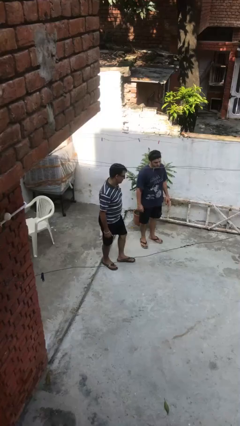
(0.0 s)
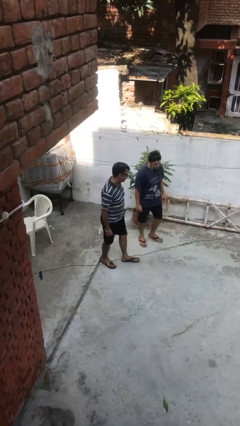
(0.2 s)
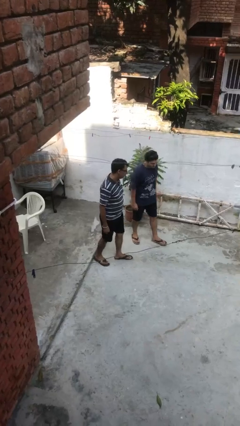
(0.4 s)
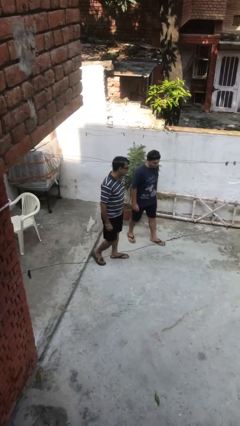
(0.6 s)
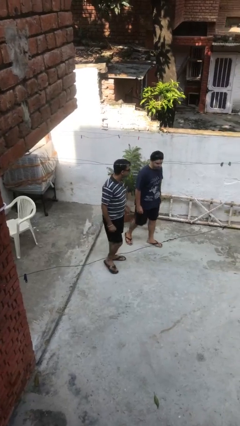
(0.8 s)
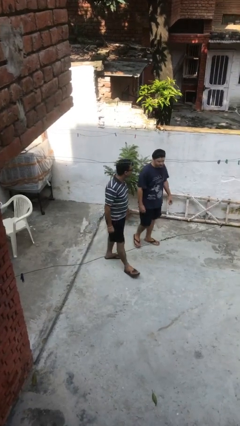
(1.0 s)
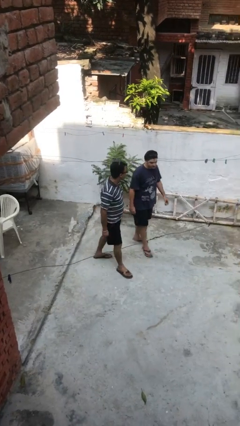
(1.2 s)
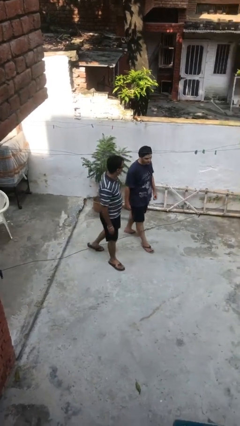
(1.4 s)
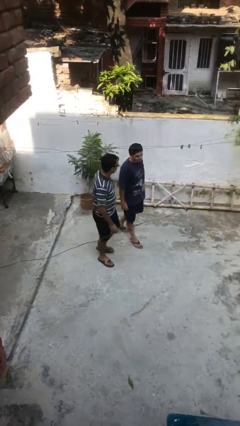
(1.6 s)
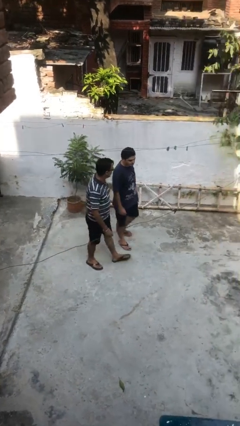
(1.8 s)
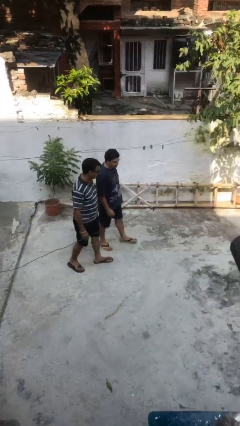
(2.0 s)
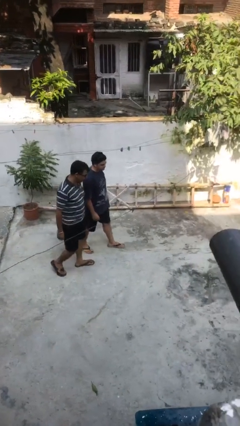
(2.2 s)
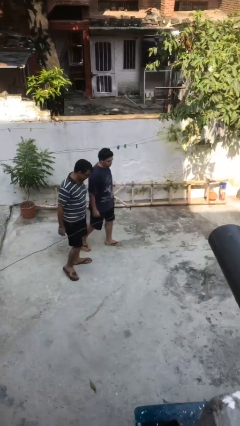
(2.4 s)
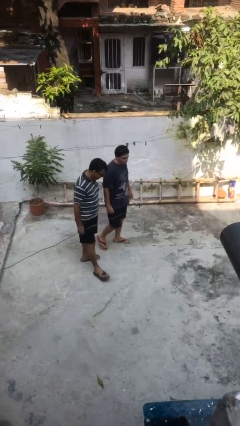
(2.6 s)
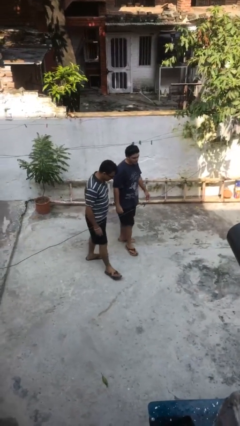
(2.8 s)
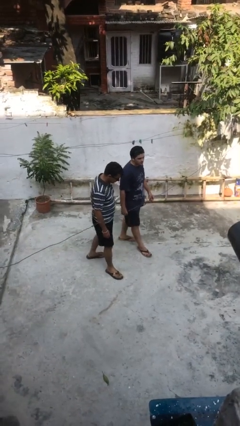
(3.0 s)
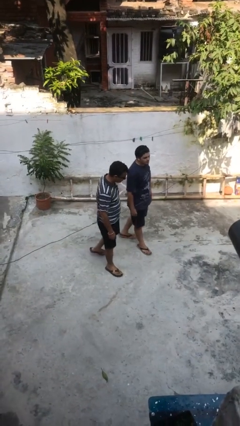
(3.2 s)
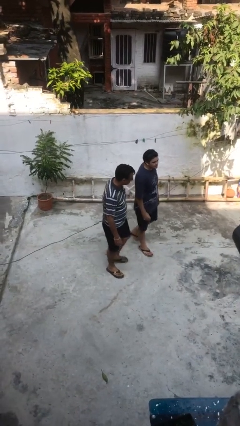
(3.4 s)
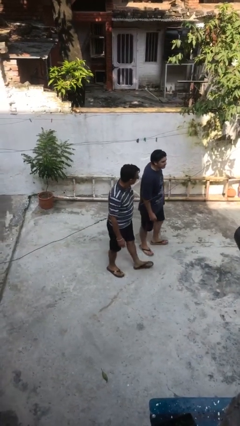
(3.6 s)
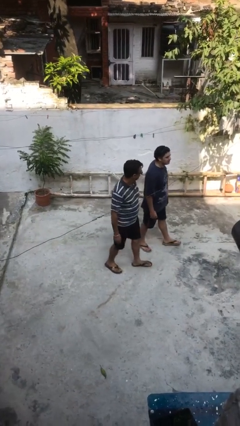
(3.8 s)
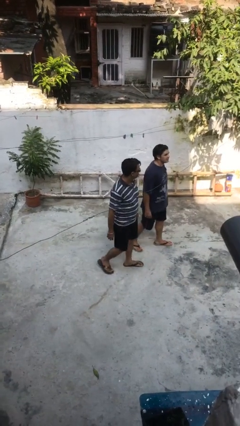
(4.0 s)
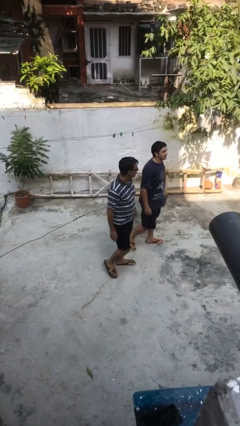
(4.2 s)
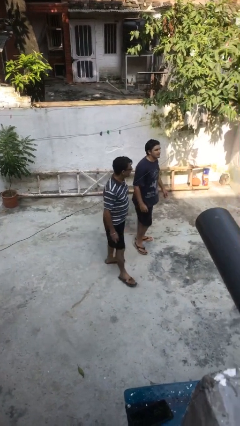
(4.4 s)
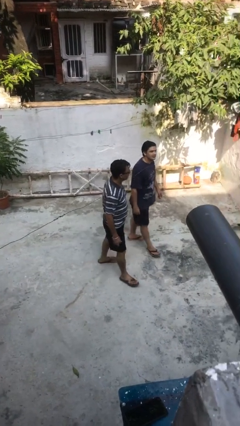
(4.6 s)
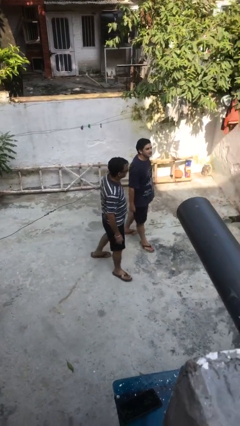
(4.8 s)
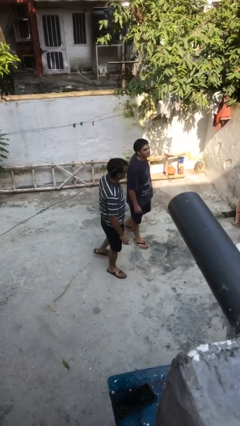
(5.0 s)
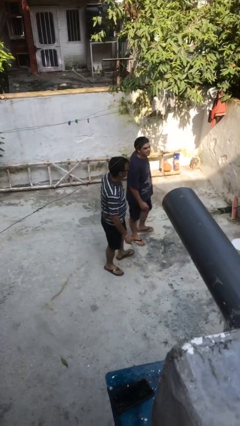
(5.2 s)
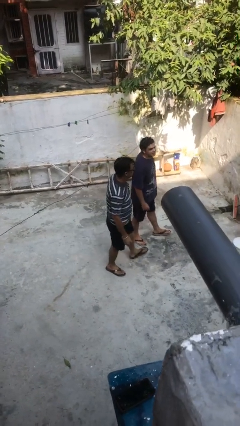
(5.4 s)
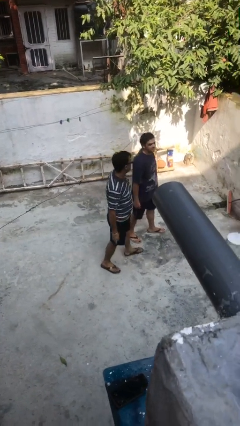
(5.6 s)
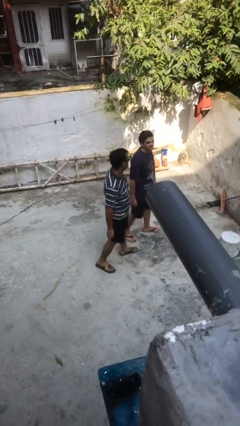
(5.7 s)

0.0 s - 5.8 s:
person talks to person

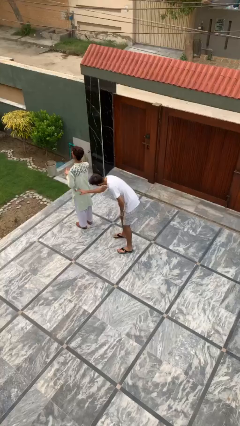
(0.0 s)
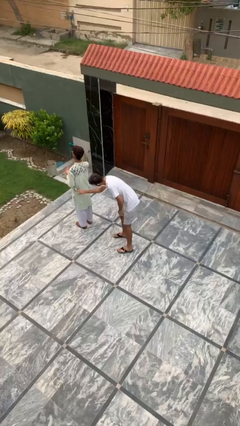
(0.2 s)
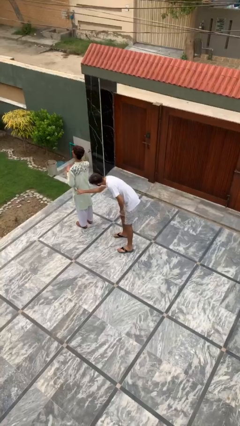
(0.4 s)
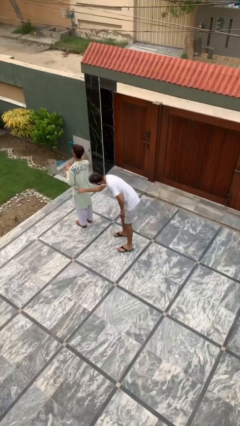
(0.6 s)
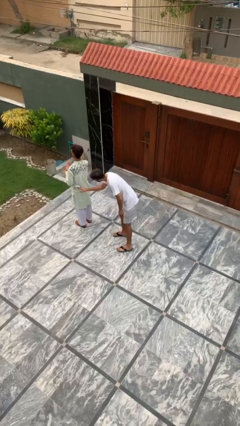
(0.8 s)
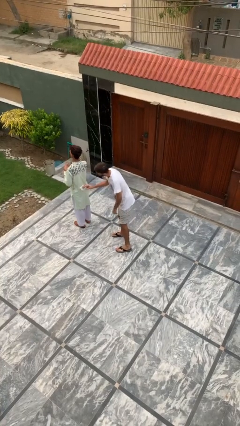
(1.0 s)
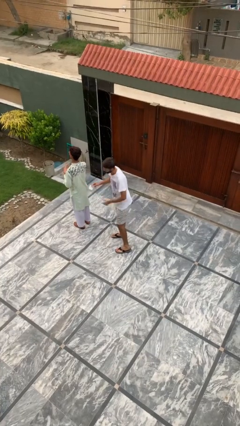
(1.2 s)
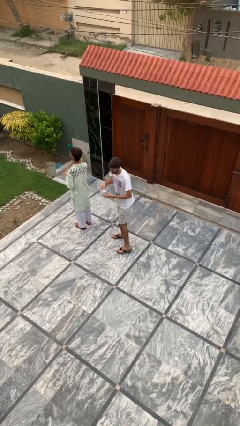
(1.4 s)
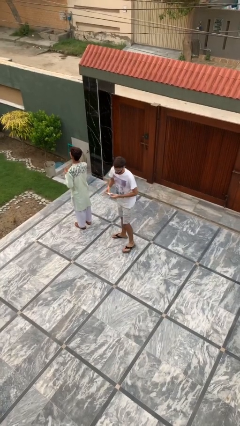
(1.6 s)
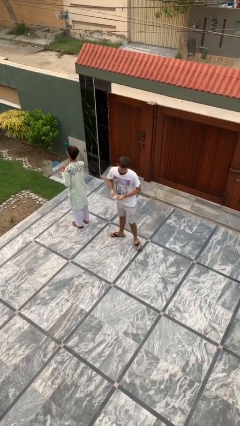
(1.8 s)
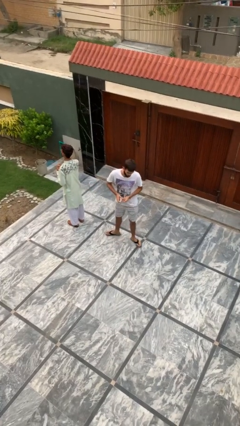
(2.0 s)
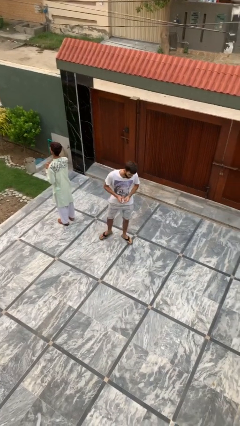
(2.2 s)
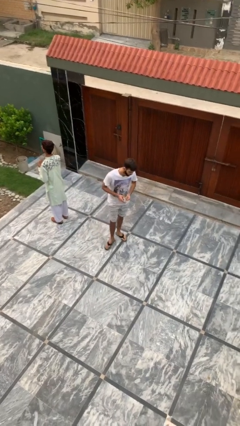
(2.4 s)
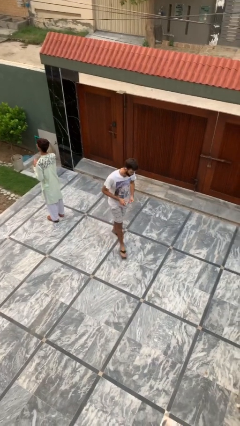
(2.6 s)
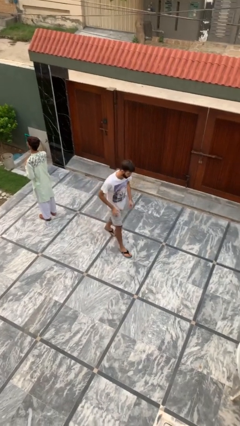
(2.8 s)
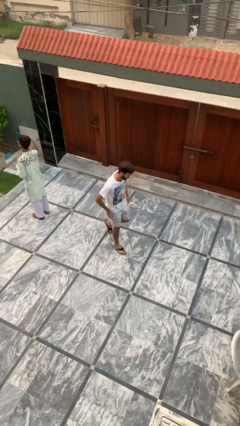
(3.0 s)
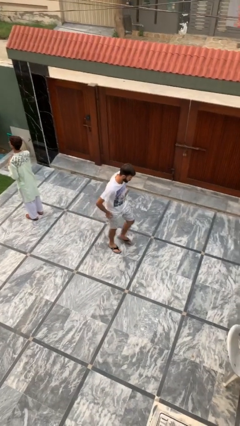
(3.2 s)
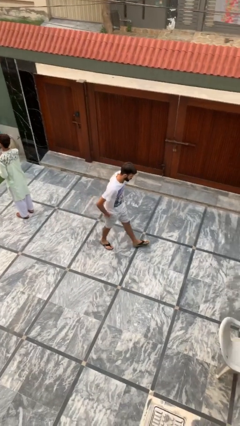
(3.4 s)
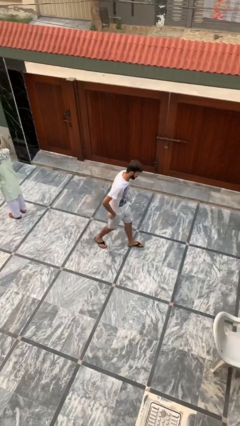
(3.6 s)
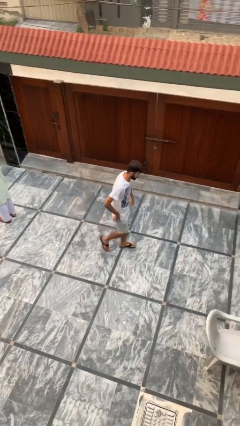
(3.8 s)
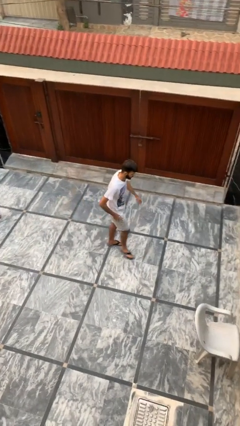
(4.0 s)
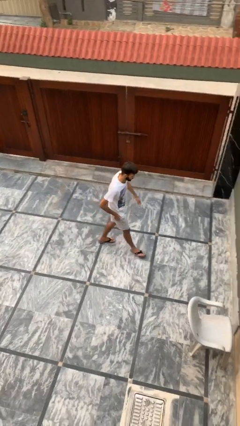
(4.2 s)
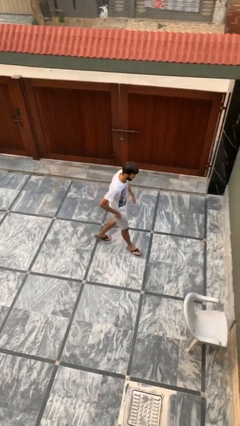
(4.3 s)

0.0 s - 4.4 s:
person steals object from person

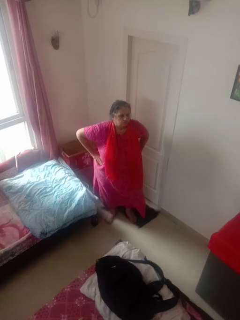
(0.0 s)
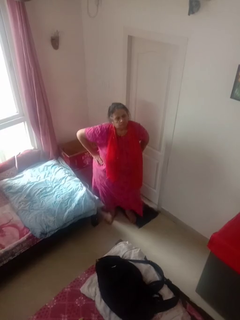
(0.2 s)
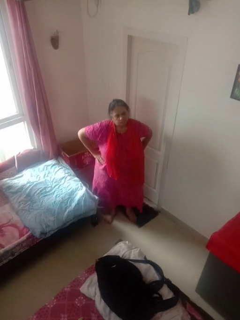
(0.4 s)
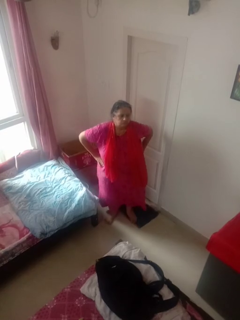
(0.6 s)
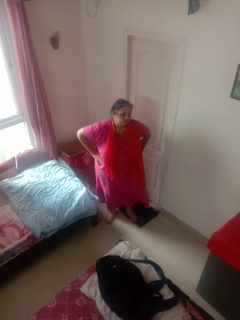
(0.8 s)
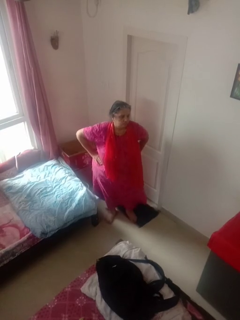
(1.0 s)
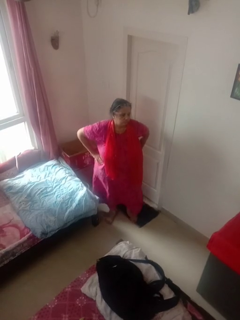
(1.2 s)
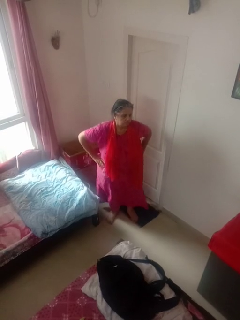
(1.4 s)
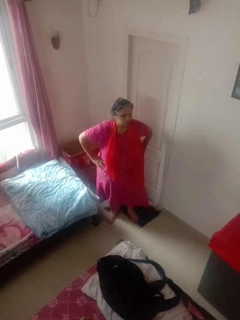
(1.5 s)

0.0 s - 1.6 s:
person wiggles hips

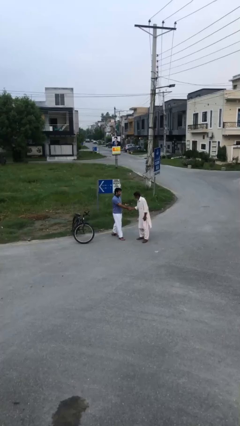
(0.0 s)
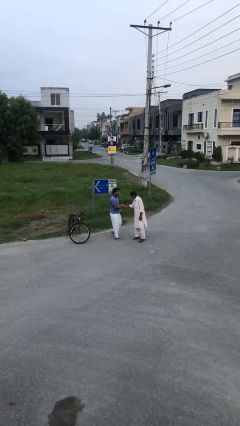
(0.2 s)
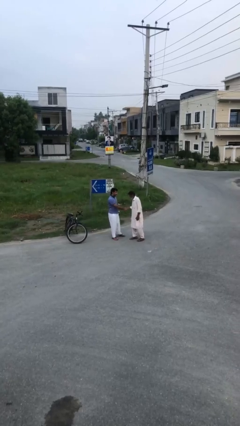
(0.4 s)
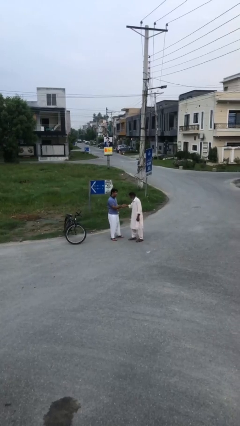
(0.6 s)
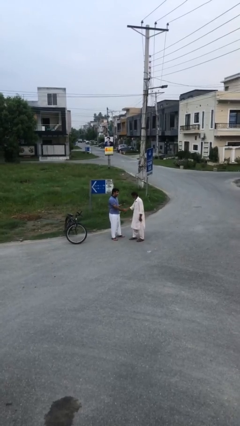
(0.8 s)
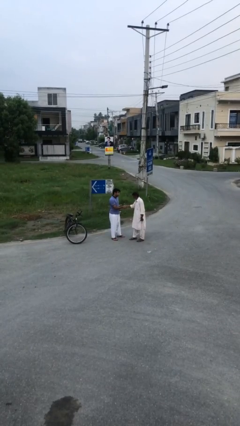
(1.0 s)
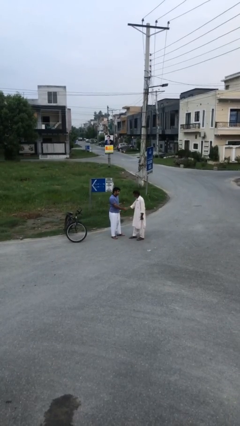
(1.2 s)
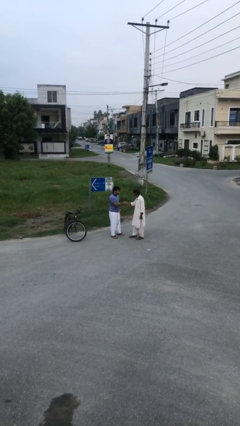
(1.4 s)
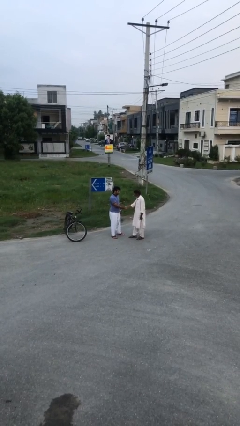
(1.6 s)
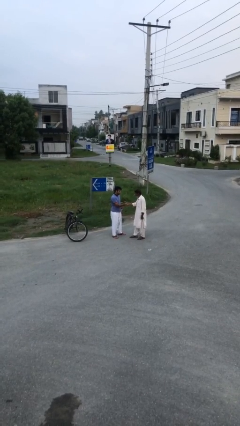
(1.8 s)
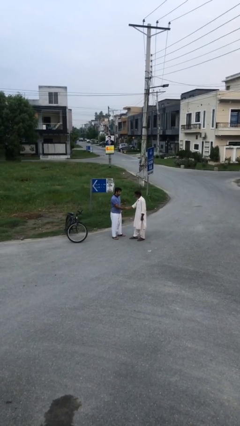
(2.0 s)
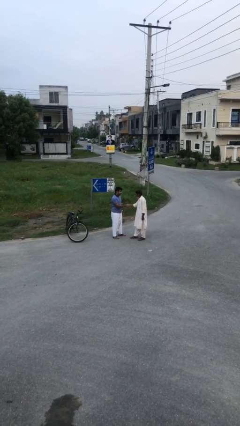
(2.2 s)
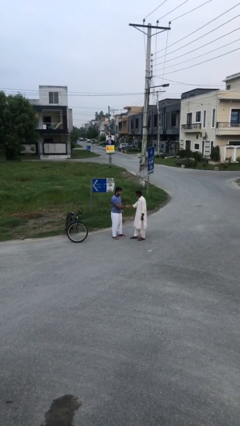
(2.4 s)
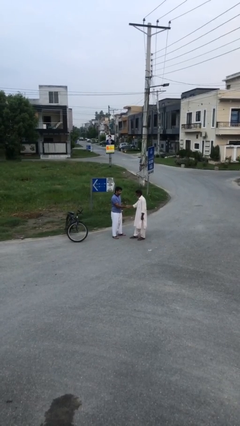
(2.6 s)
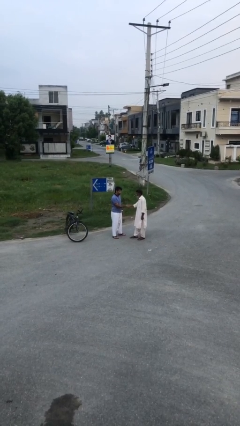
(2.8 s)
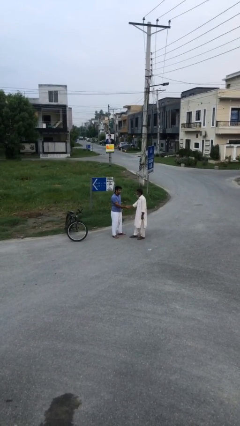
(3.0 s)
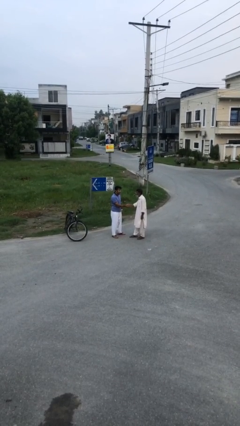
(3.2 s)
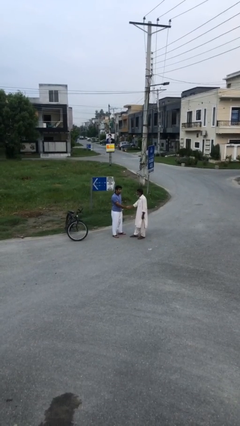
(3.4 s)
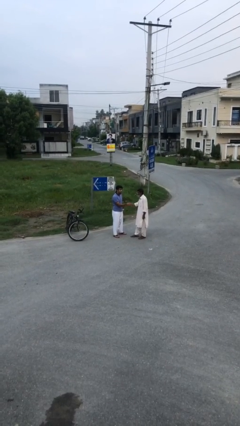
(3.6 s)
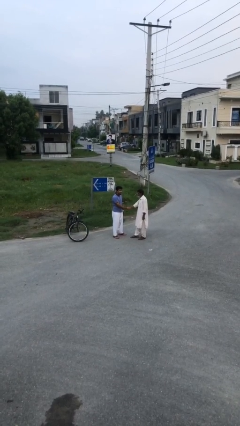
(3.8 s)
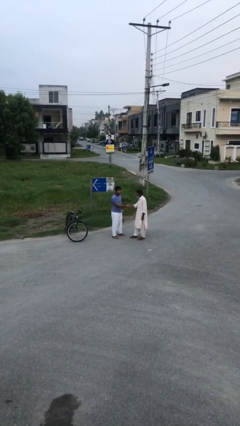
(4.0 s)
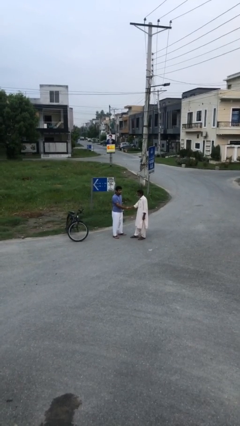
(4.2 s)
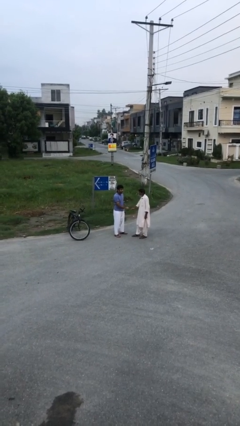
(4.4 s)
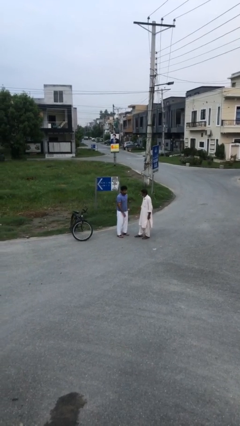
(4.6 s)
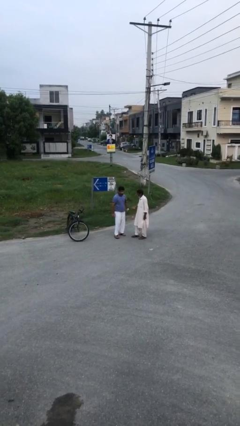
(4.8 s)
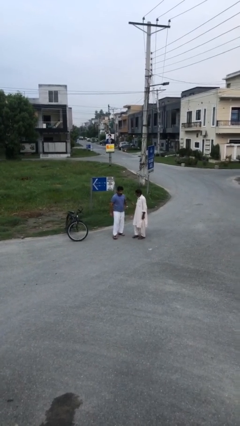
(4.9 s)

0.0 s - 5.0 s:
person shakes hand

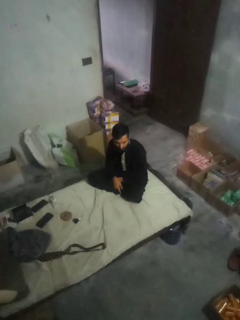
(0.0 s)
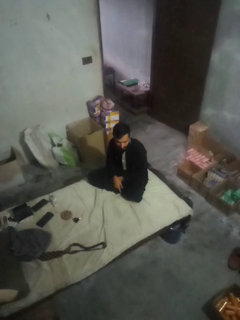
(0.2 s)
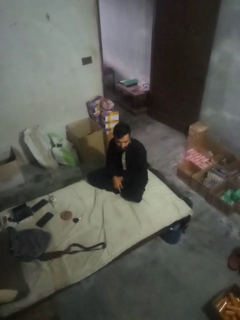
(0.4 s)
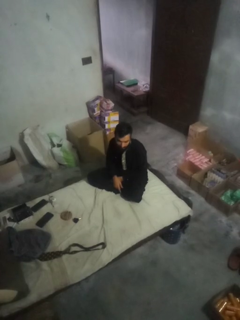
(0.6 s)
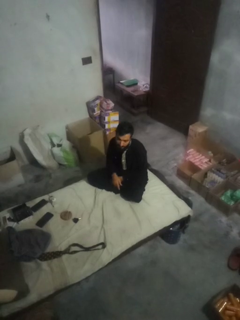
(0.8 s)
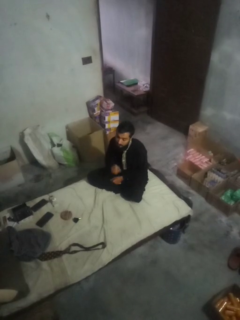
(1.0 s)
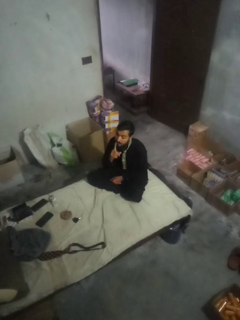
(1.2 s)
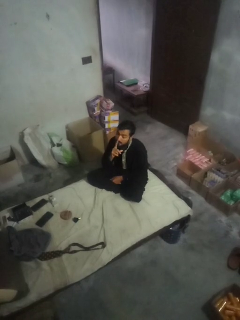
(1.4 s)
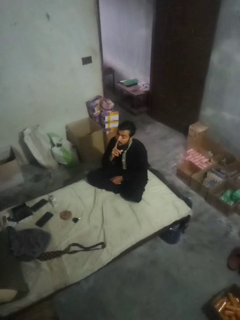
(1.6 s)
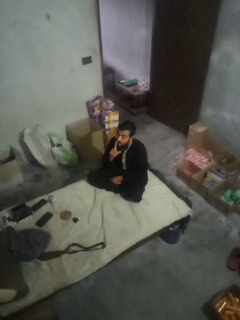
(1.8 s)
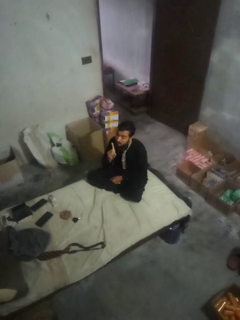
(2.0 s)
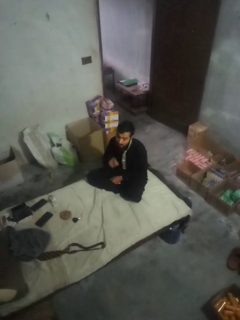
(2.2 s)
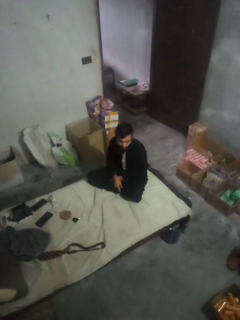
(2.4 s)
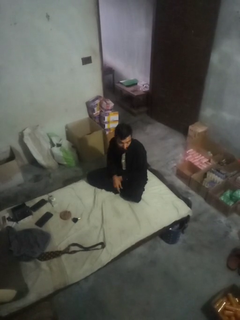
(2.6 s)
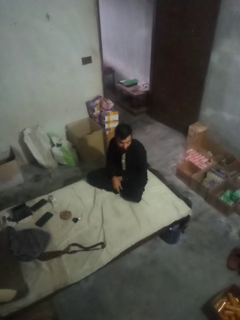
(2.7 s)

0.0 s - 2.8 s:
person gestures be quiet
